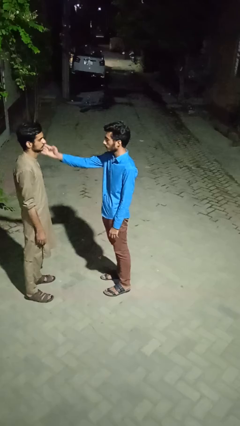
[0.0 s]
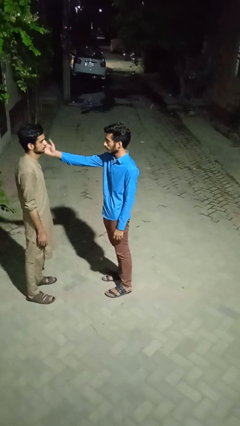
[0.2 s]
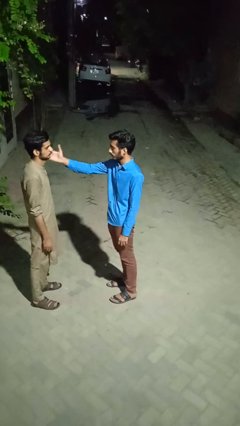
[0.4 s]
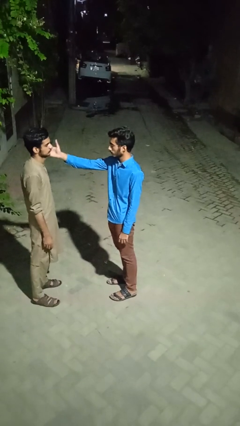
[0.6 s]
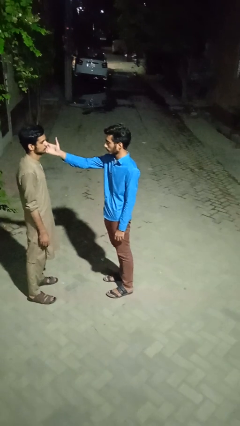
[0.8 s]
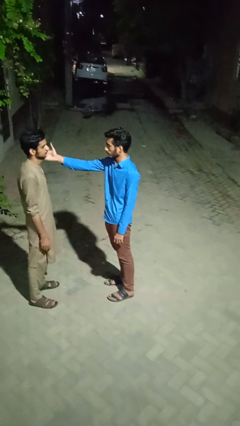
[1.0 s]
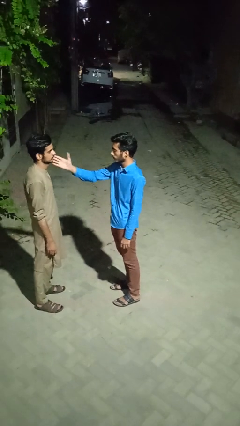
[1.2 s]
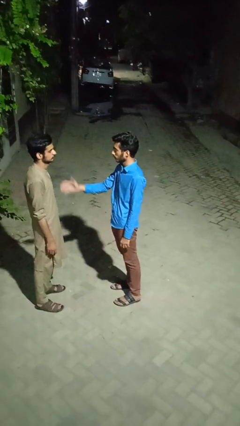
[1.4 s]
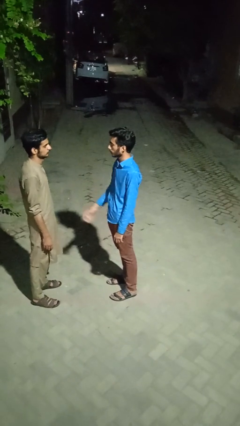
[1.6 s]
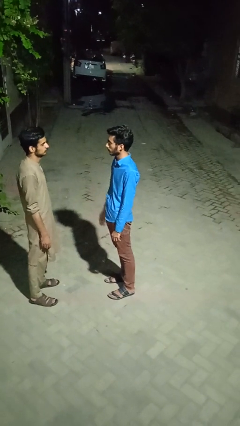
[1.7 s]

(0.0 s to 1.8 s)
person touches face of person

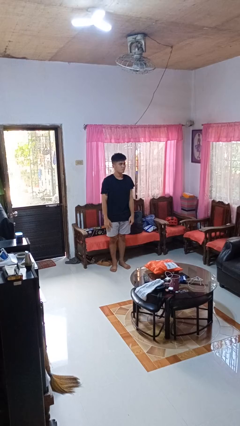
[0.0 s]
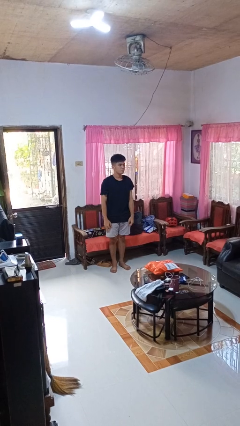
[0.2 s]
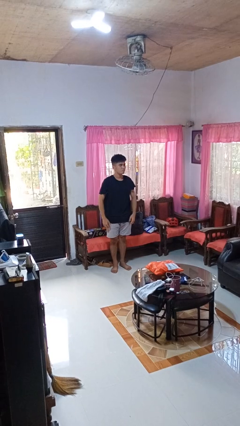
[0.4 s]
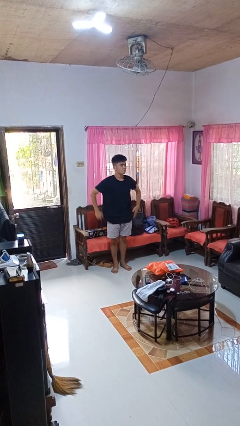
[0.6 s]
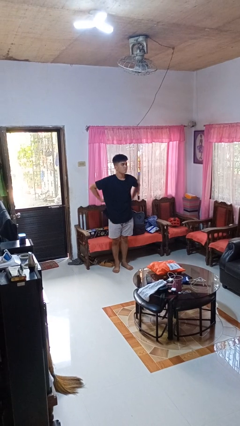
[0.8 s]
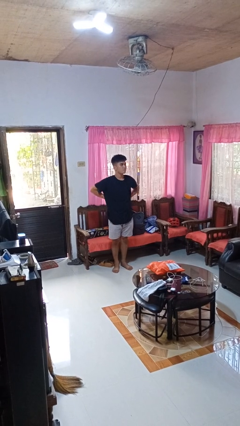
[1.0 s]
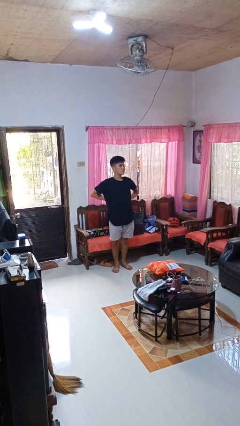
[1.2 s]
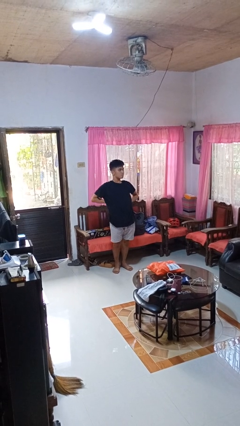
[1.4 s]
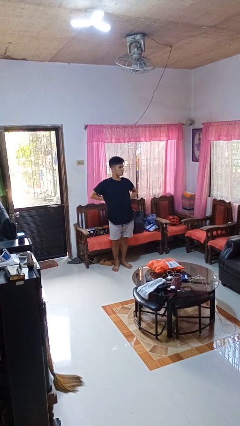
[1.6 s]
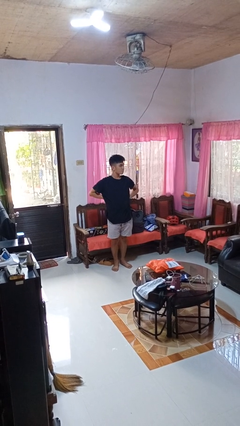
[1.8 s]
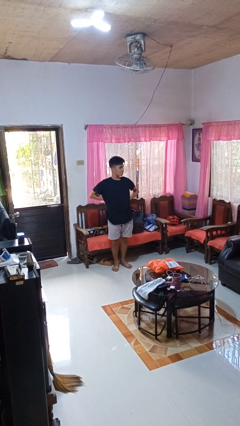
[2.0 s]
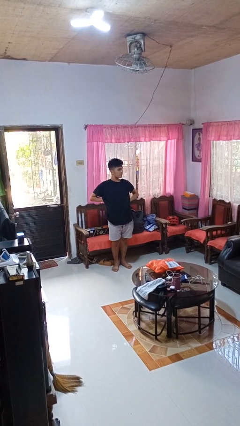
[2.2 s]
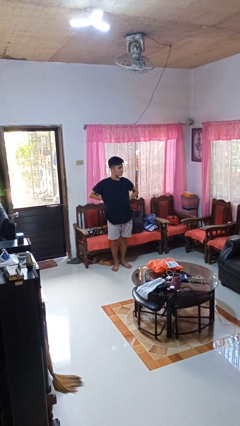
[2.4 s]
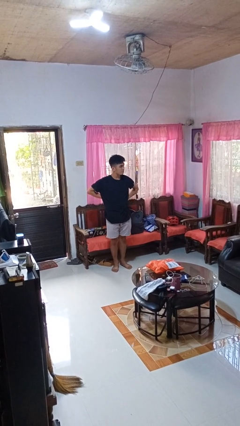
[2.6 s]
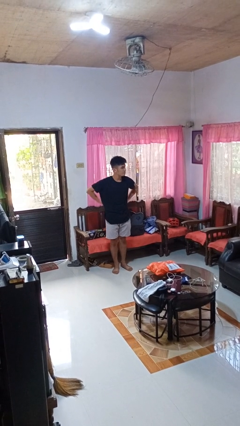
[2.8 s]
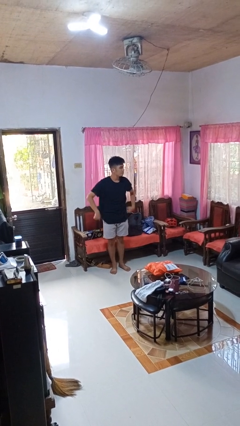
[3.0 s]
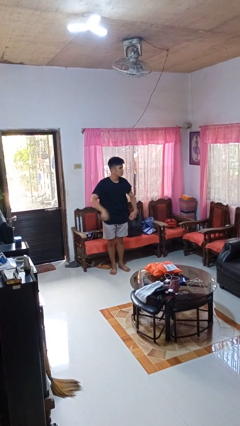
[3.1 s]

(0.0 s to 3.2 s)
person stretches back

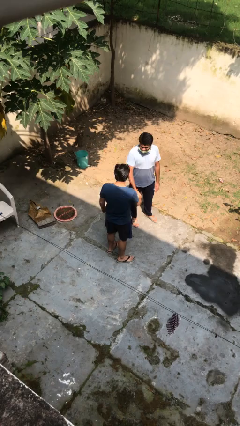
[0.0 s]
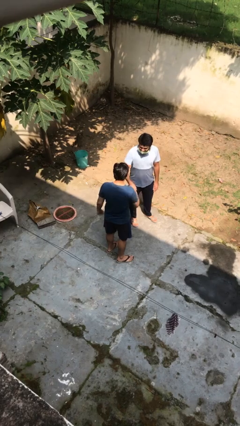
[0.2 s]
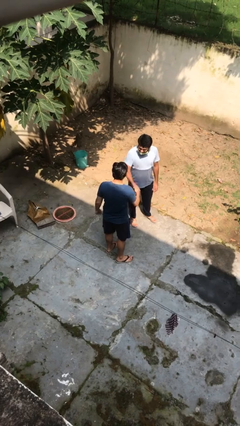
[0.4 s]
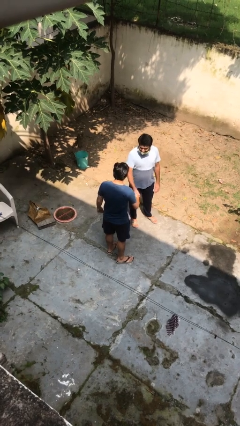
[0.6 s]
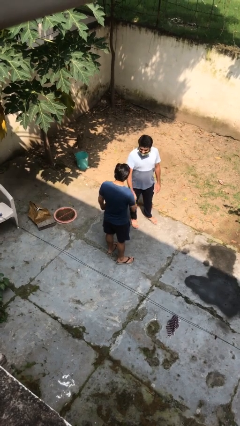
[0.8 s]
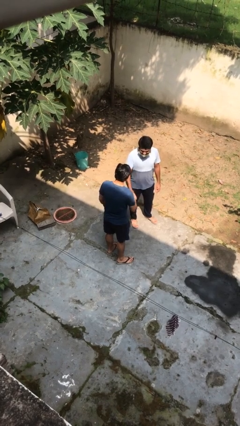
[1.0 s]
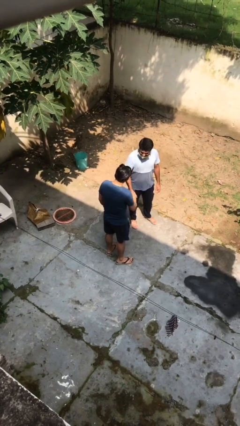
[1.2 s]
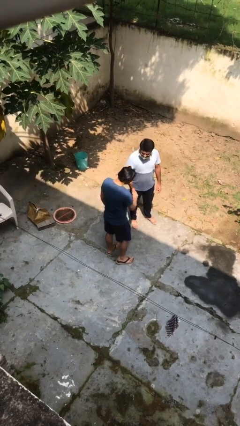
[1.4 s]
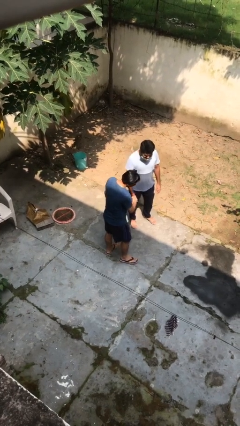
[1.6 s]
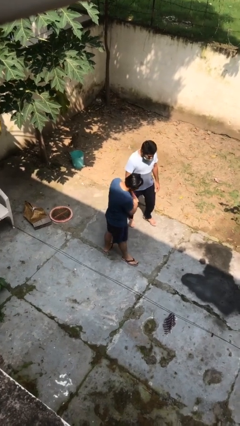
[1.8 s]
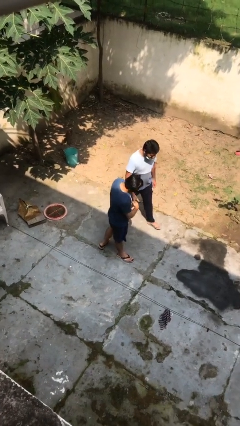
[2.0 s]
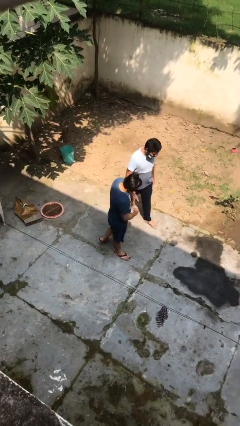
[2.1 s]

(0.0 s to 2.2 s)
person shakes hand

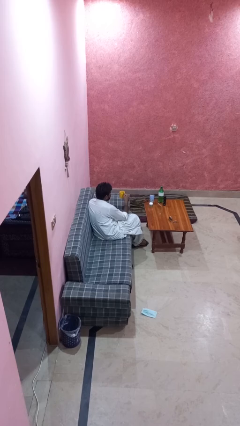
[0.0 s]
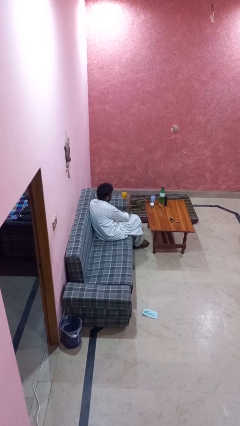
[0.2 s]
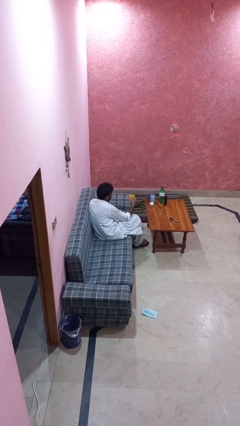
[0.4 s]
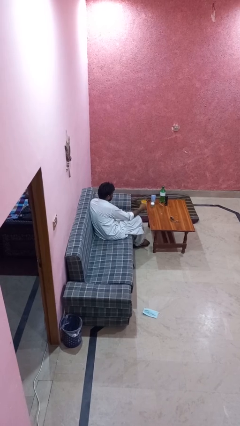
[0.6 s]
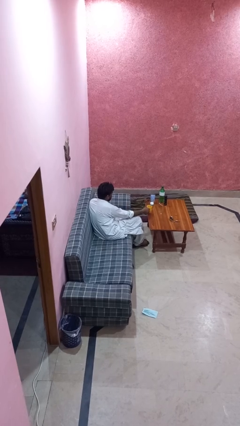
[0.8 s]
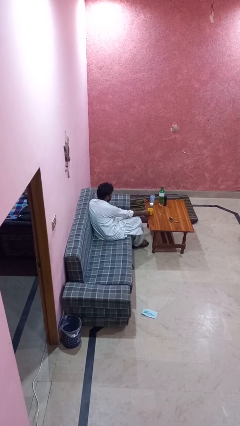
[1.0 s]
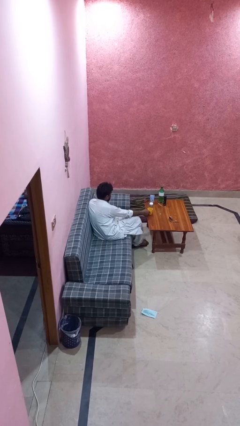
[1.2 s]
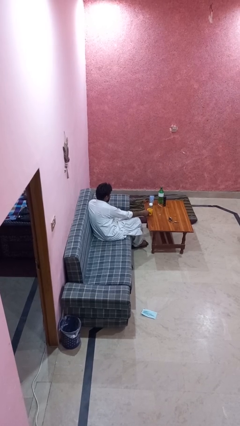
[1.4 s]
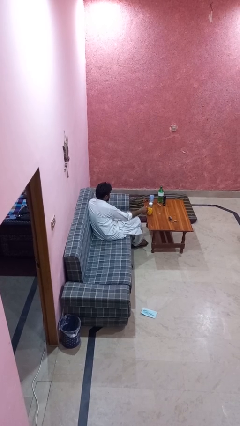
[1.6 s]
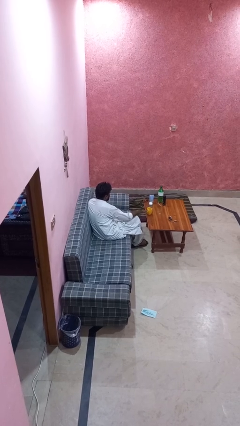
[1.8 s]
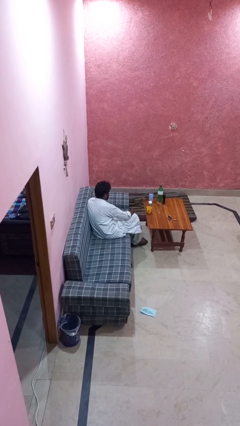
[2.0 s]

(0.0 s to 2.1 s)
person puts down object on table

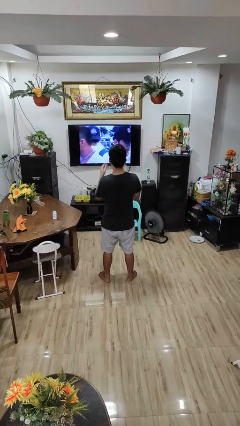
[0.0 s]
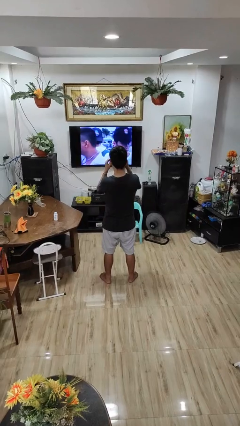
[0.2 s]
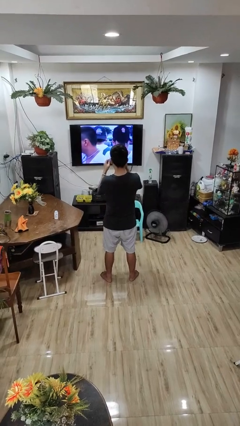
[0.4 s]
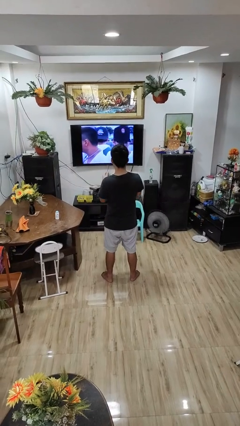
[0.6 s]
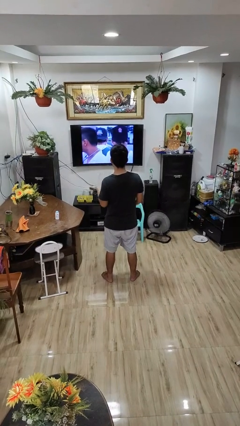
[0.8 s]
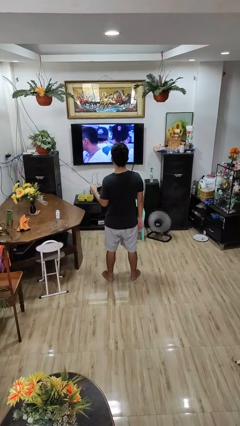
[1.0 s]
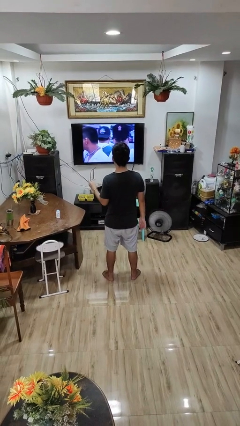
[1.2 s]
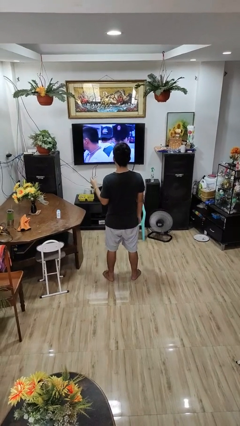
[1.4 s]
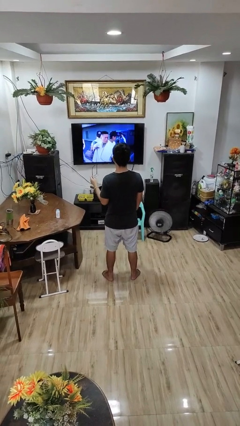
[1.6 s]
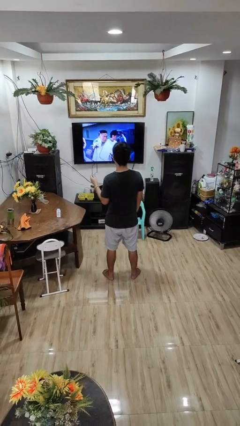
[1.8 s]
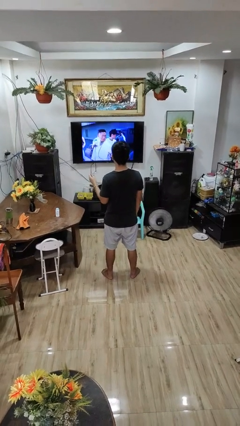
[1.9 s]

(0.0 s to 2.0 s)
person takes off glasses

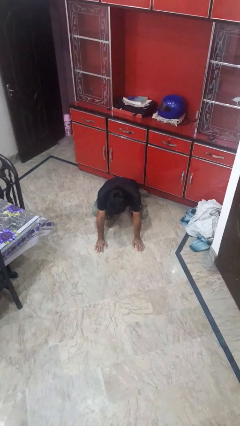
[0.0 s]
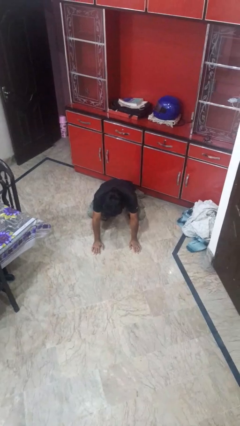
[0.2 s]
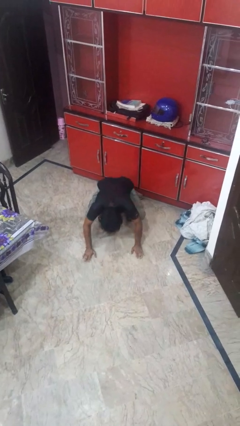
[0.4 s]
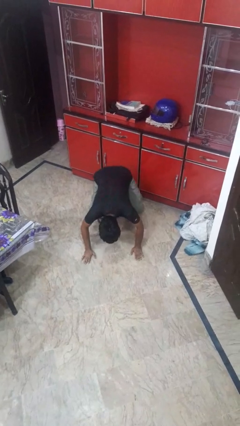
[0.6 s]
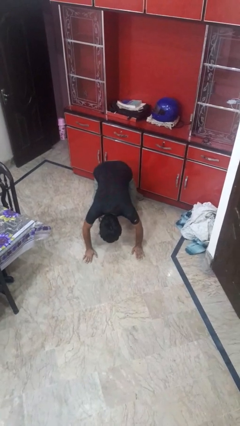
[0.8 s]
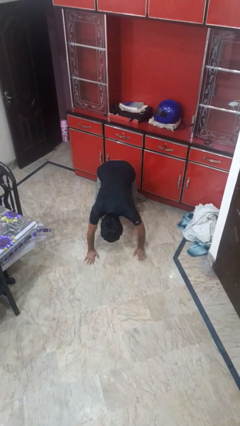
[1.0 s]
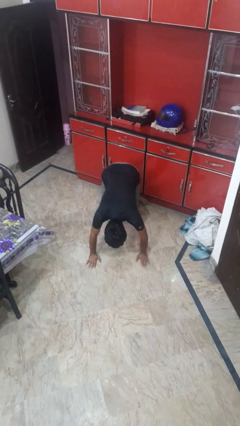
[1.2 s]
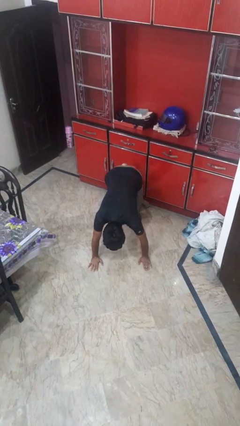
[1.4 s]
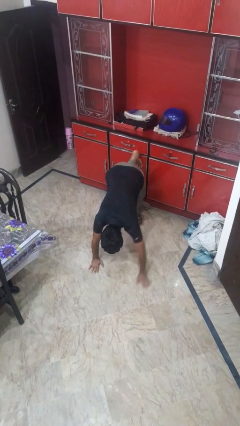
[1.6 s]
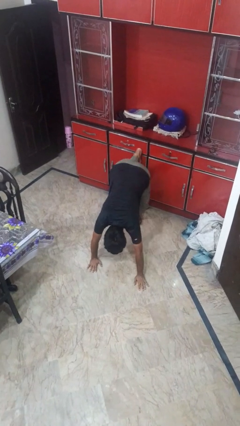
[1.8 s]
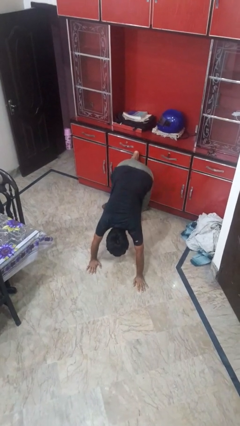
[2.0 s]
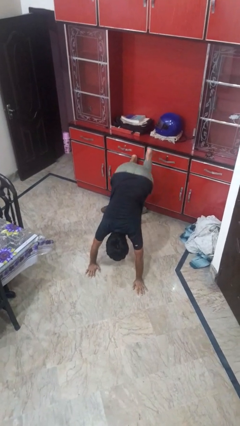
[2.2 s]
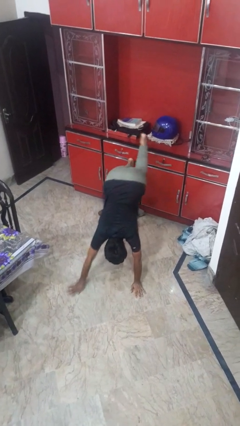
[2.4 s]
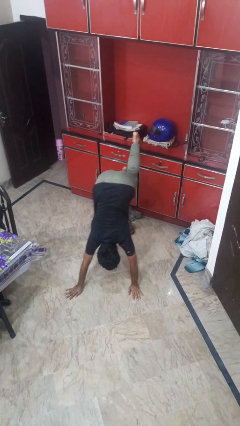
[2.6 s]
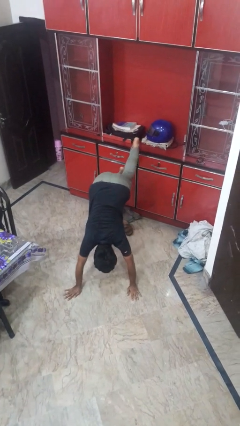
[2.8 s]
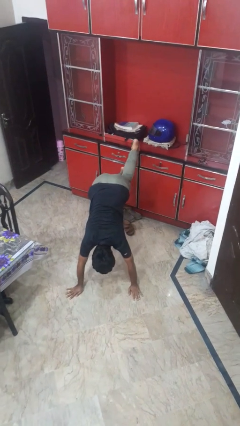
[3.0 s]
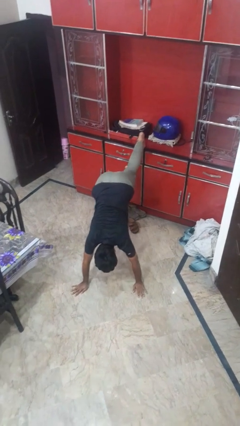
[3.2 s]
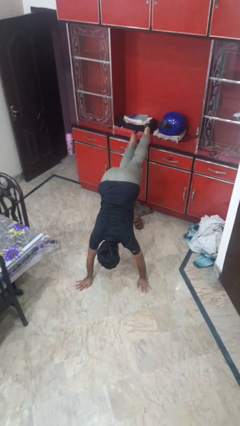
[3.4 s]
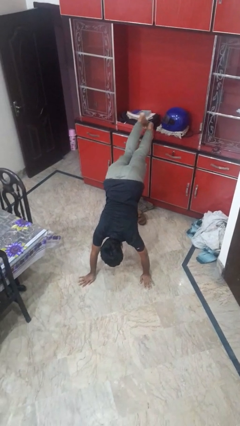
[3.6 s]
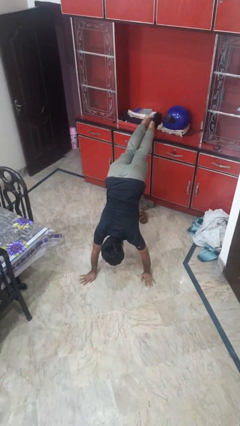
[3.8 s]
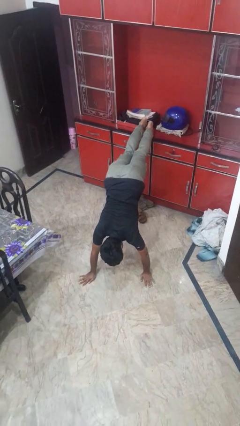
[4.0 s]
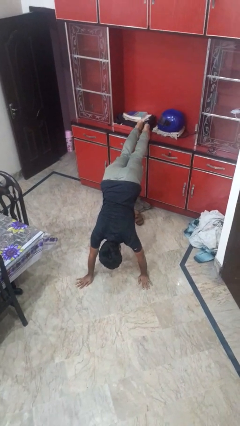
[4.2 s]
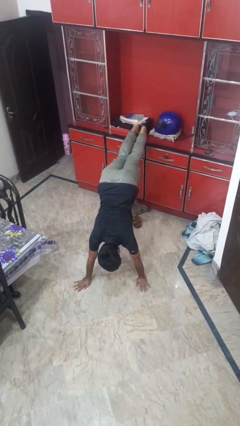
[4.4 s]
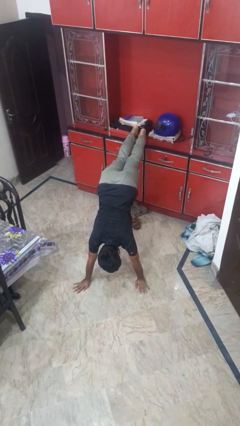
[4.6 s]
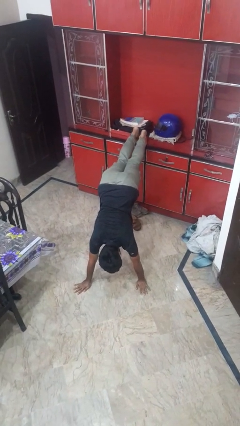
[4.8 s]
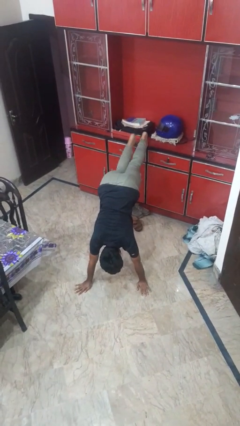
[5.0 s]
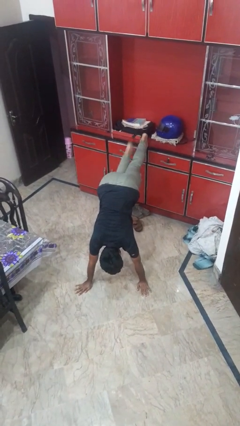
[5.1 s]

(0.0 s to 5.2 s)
person handstand

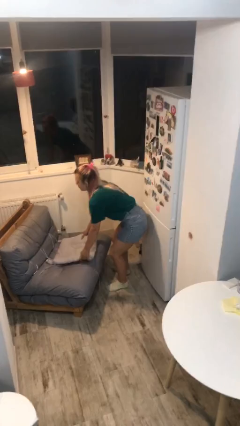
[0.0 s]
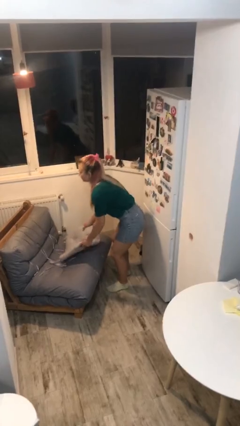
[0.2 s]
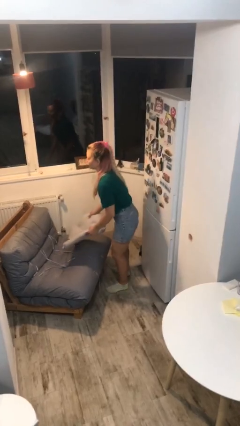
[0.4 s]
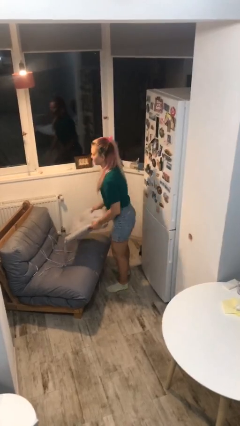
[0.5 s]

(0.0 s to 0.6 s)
person picks up object from couch
